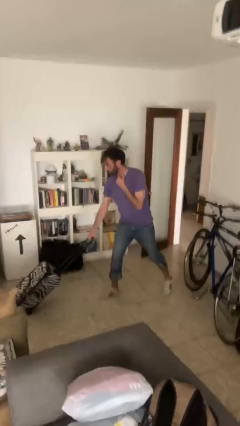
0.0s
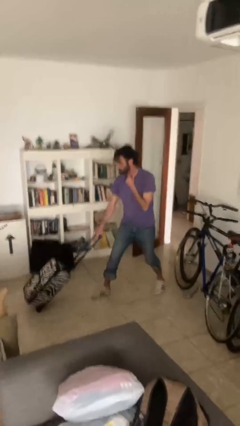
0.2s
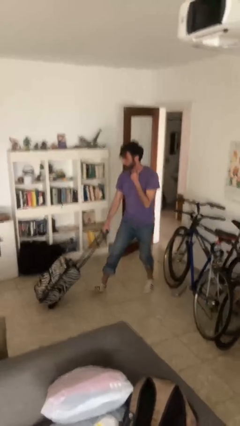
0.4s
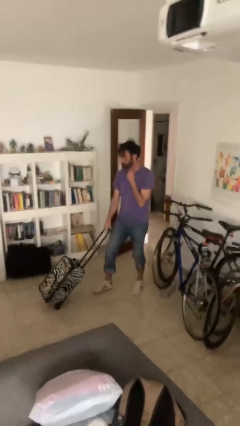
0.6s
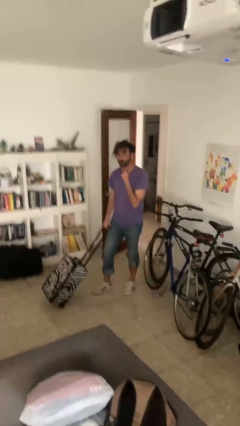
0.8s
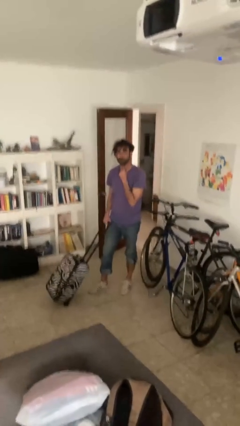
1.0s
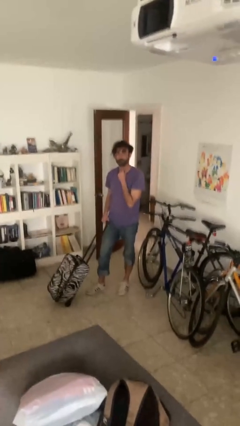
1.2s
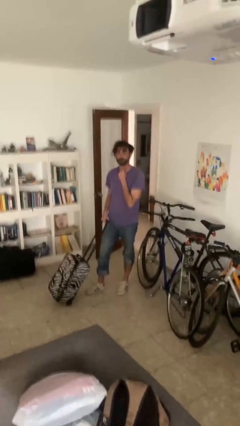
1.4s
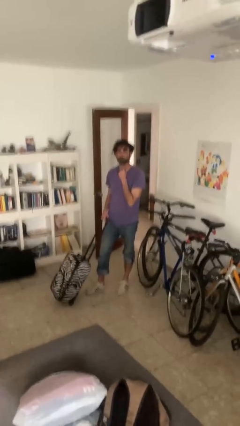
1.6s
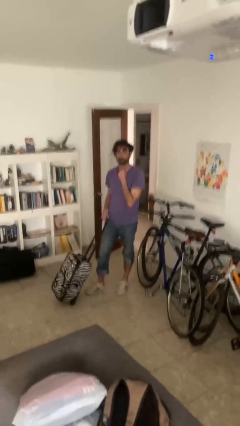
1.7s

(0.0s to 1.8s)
person pulls wheeled cart

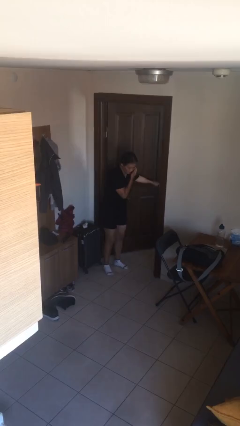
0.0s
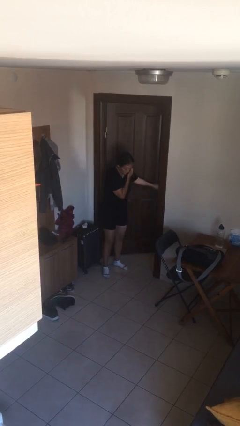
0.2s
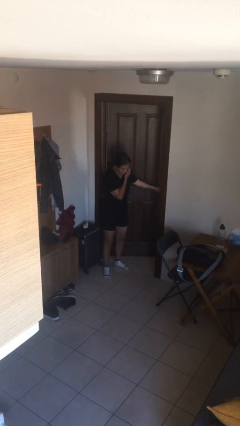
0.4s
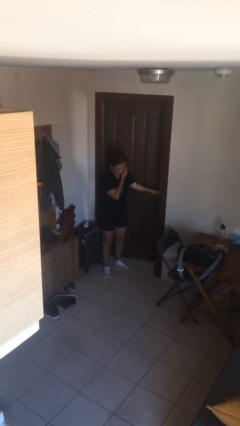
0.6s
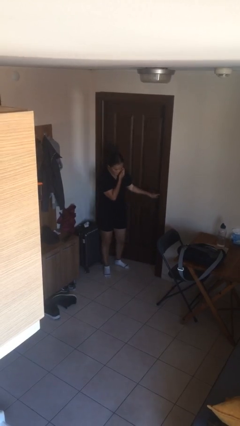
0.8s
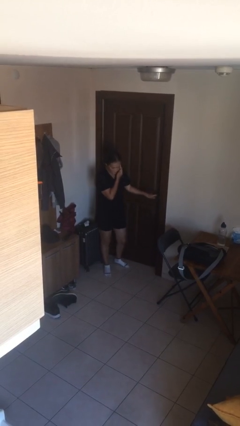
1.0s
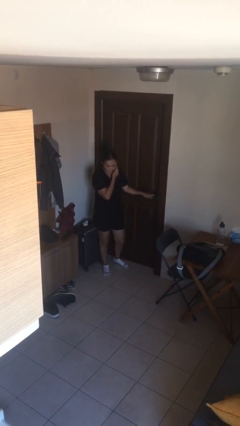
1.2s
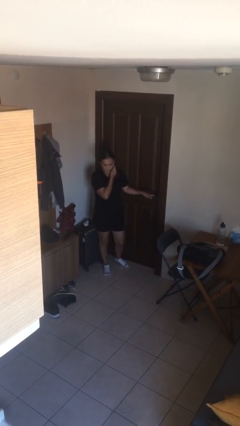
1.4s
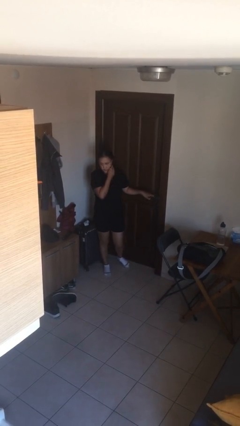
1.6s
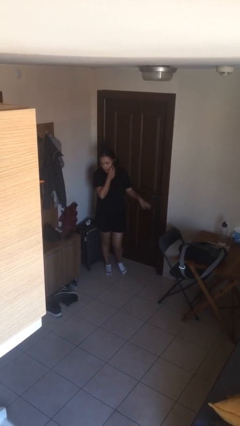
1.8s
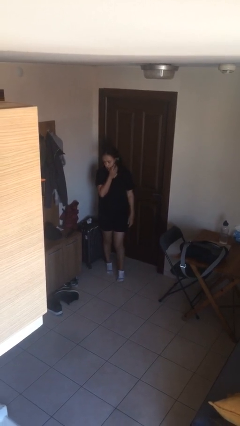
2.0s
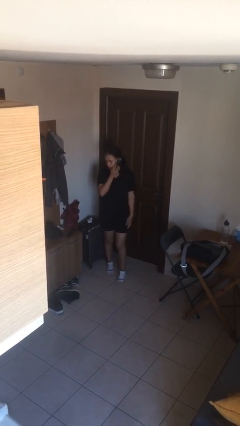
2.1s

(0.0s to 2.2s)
person closes facility door

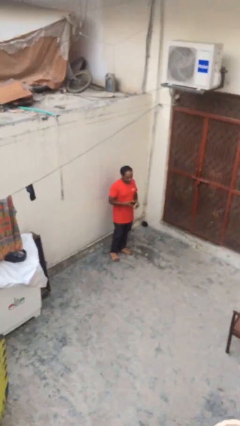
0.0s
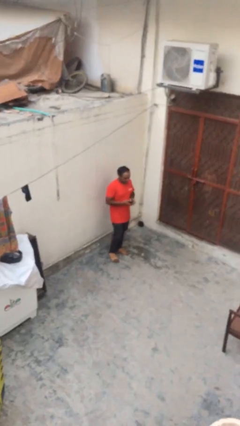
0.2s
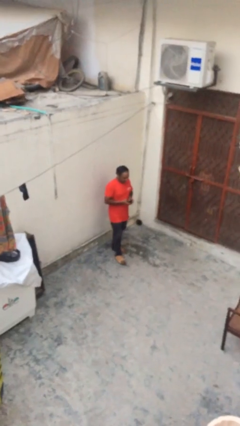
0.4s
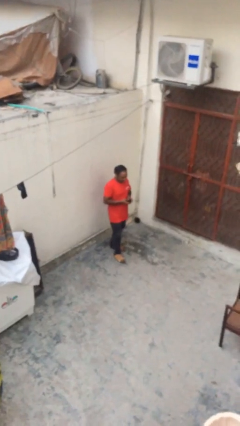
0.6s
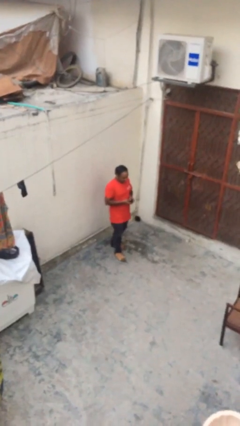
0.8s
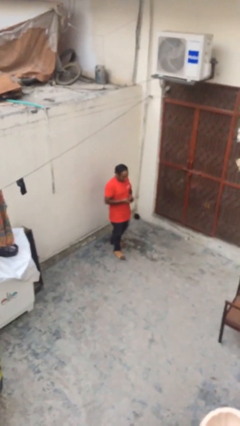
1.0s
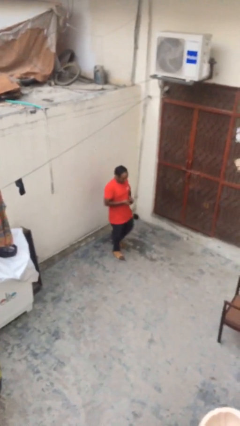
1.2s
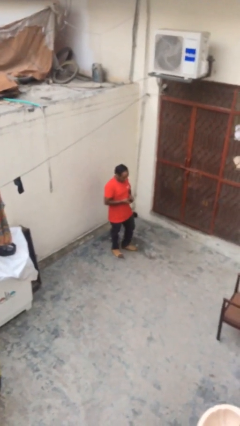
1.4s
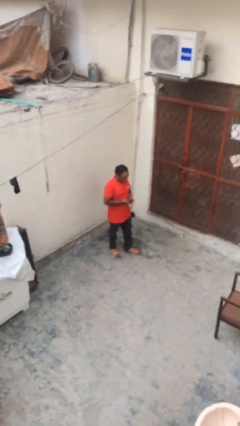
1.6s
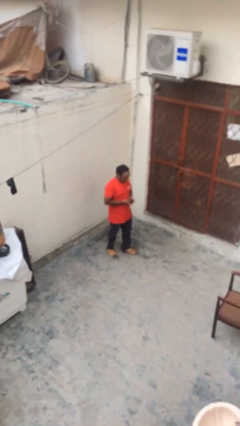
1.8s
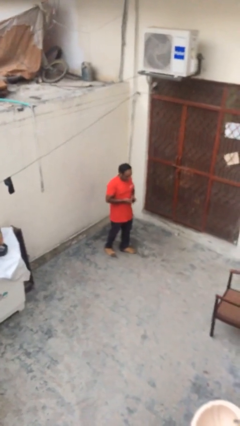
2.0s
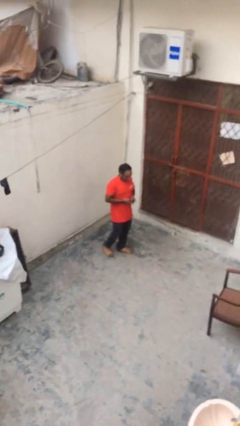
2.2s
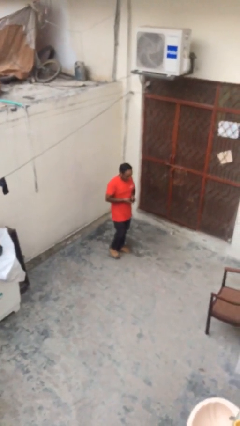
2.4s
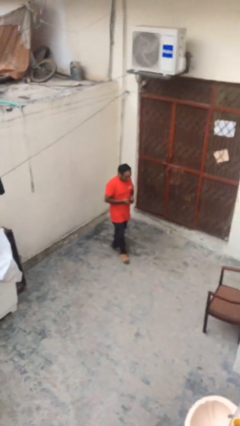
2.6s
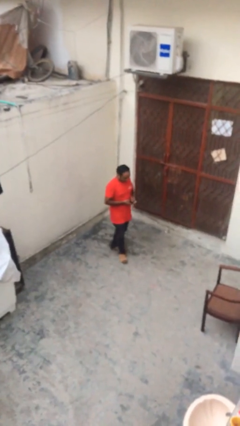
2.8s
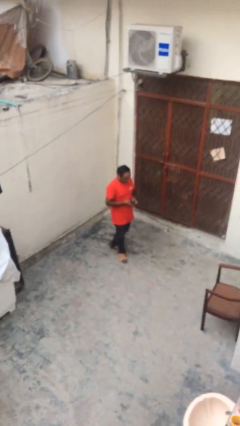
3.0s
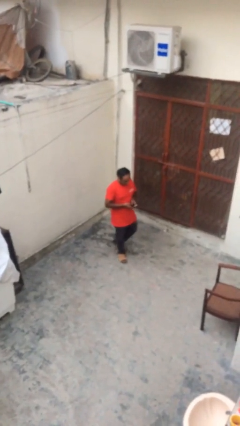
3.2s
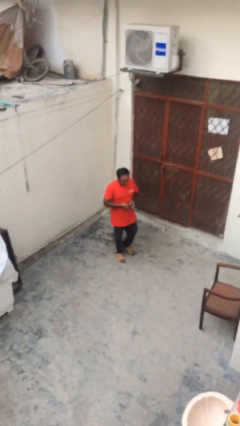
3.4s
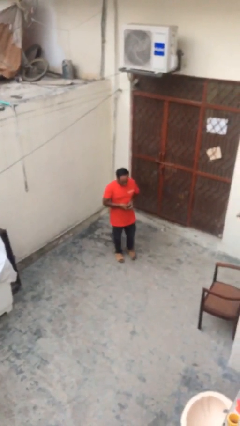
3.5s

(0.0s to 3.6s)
person texts on phone

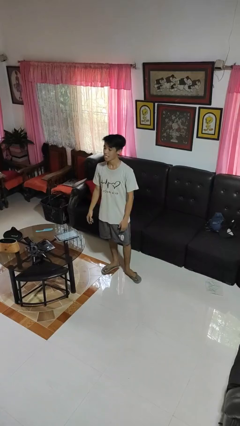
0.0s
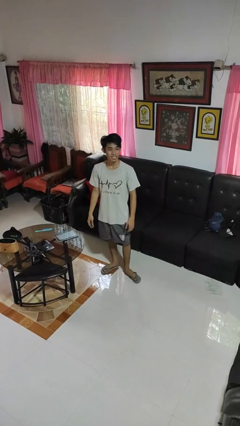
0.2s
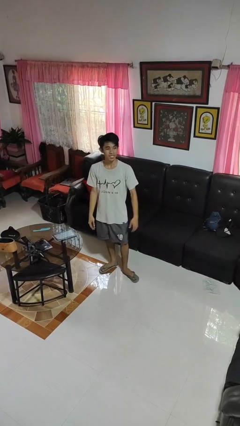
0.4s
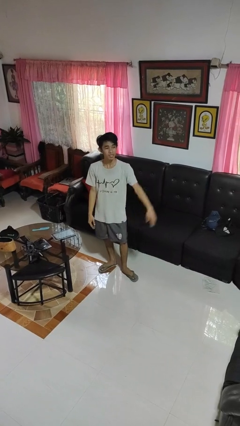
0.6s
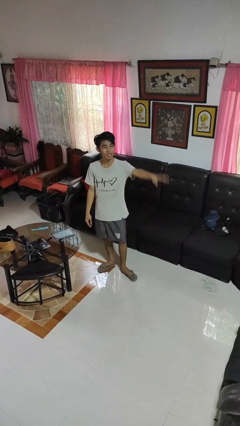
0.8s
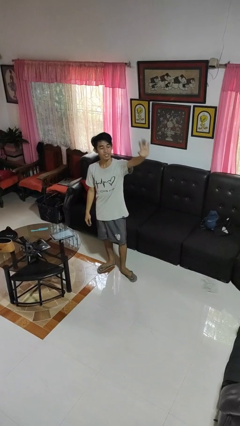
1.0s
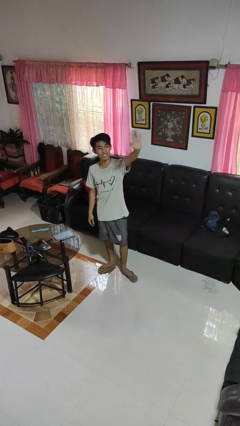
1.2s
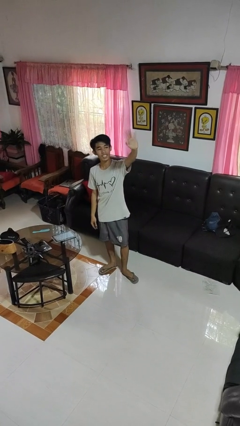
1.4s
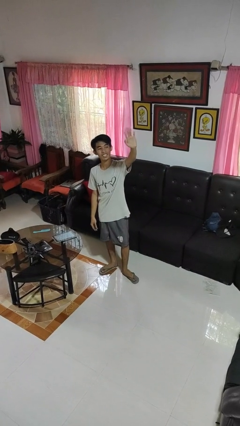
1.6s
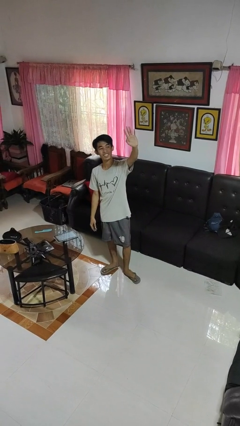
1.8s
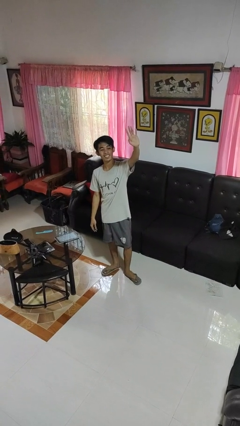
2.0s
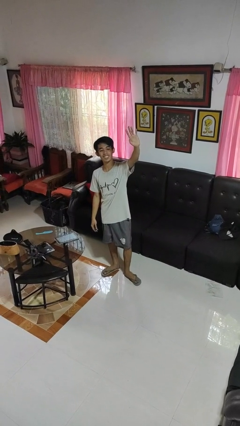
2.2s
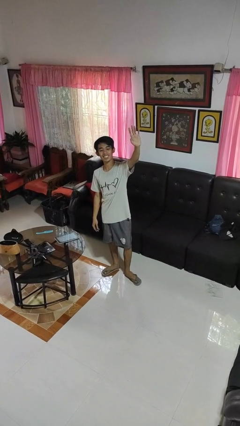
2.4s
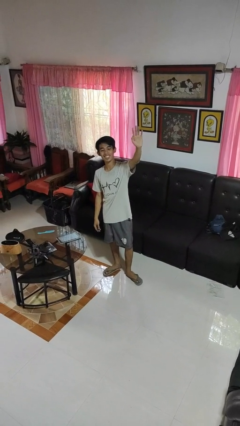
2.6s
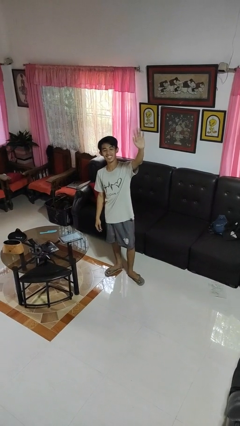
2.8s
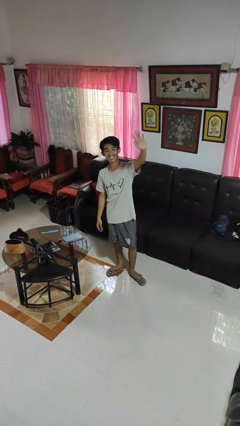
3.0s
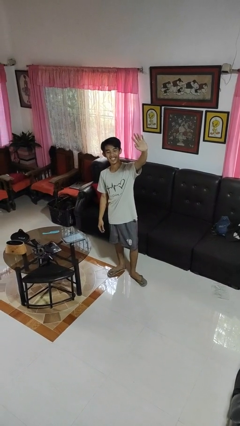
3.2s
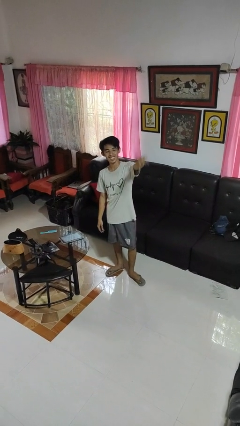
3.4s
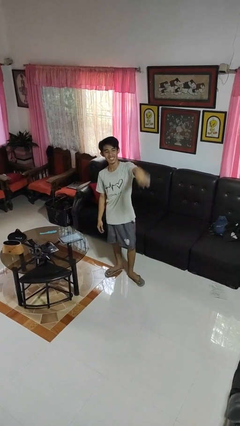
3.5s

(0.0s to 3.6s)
person waves at person

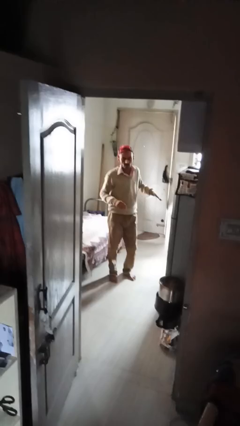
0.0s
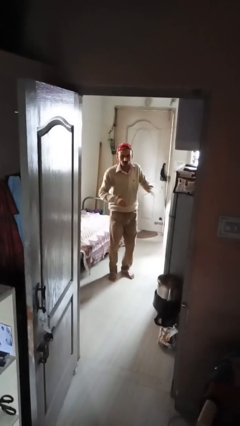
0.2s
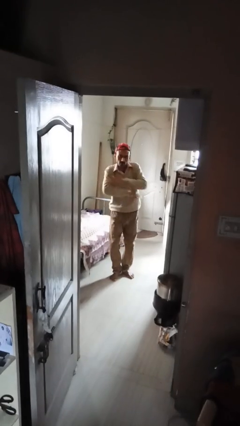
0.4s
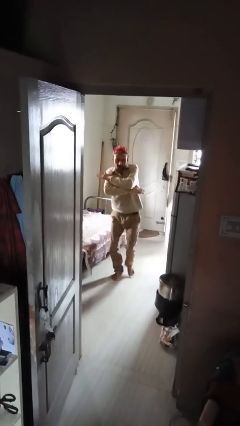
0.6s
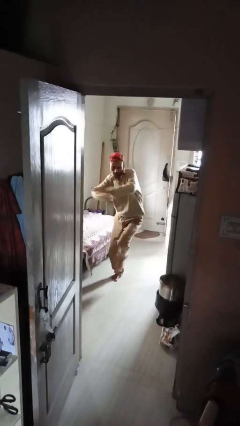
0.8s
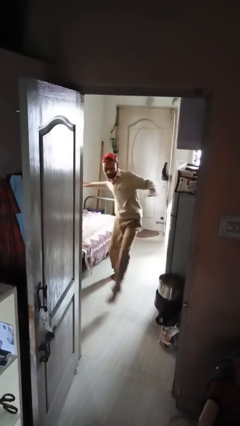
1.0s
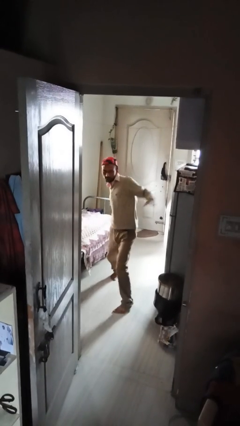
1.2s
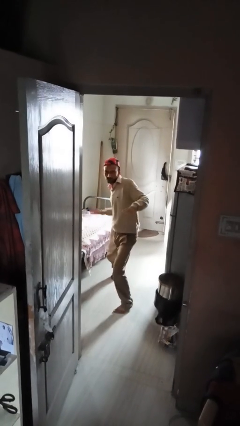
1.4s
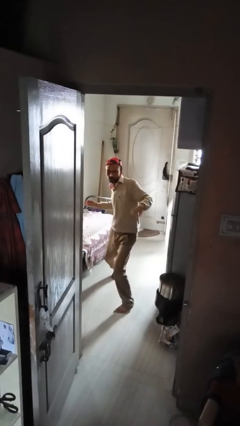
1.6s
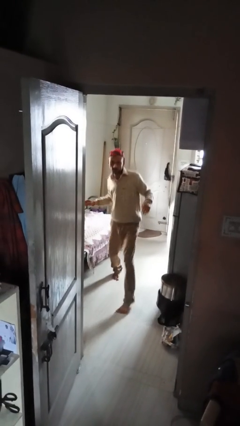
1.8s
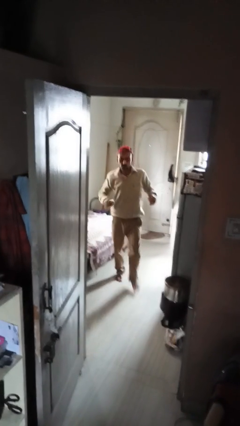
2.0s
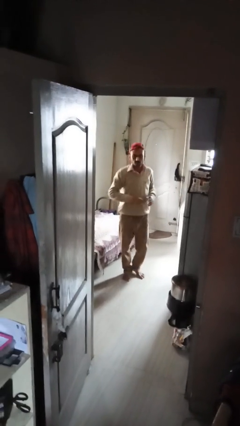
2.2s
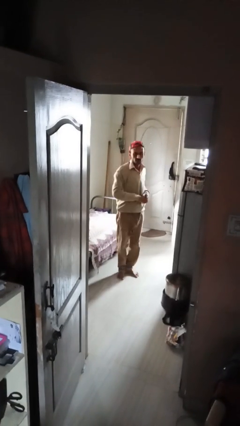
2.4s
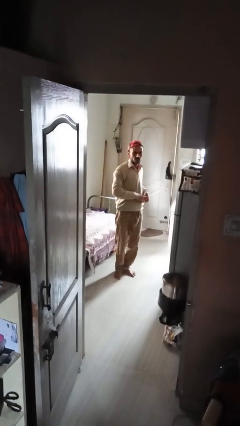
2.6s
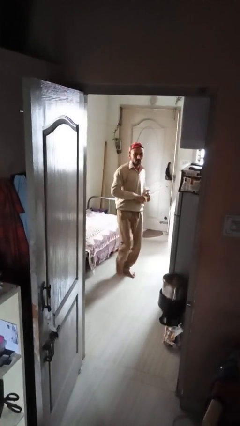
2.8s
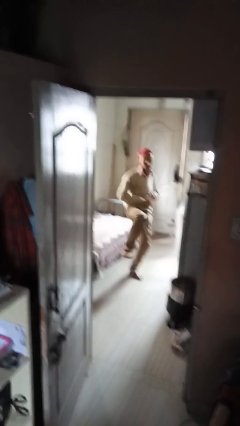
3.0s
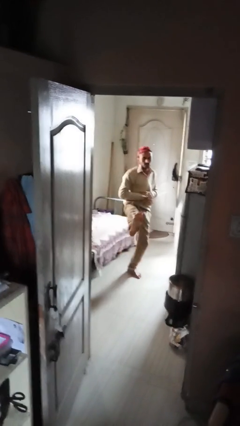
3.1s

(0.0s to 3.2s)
person karate chop

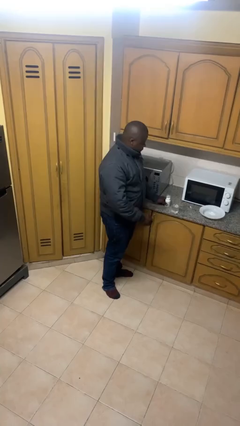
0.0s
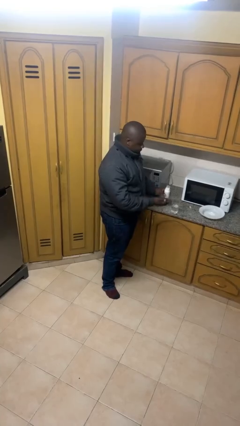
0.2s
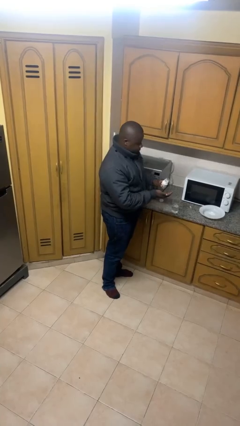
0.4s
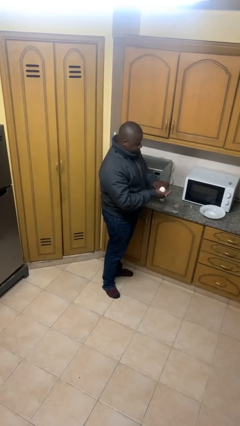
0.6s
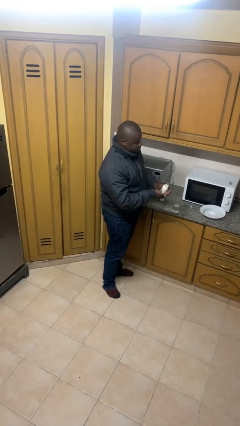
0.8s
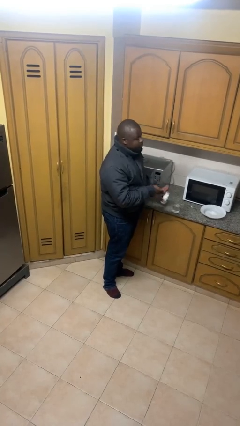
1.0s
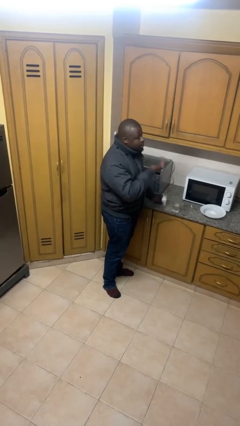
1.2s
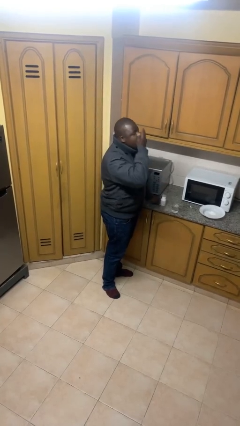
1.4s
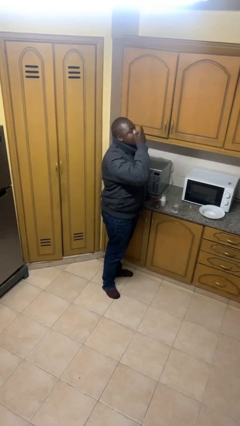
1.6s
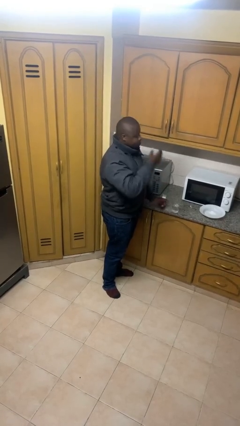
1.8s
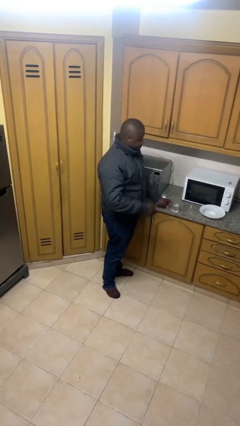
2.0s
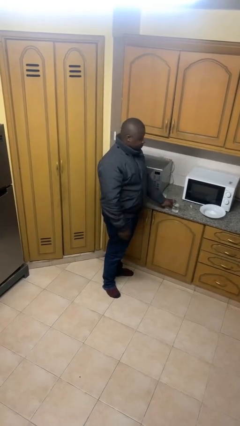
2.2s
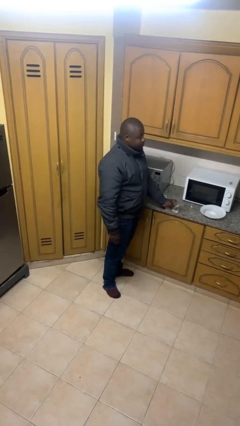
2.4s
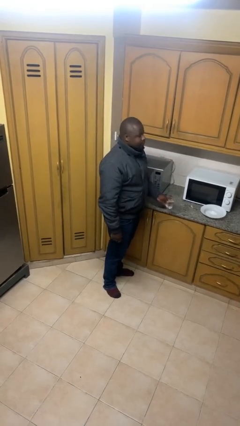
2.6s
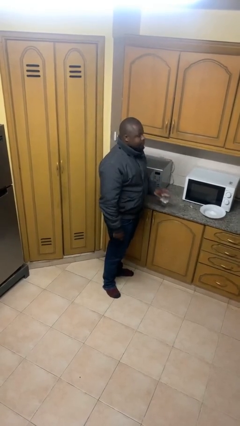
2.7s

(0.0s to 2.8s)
person takes medicine pills
